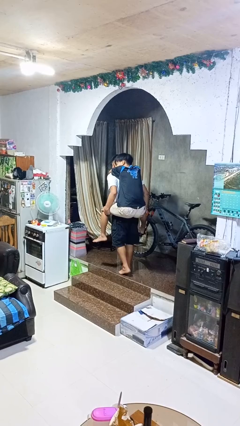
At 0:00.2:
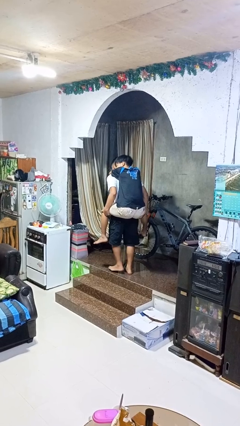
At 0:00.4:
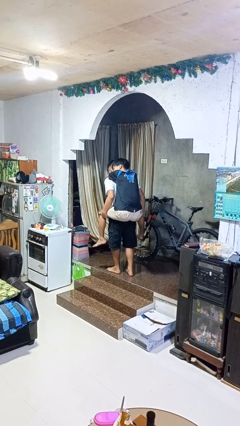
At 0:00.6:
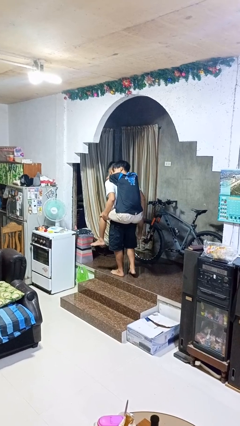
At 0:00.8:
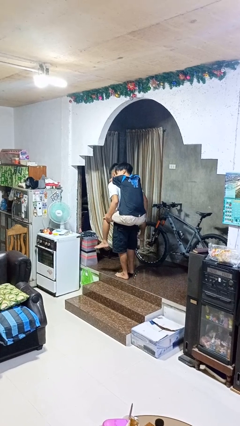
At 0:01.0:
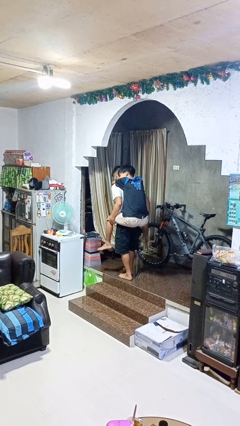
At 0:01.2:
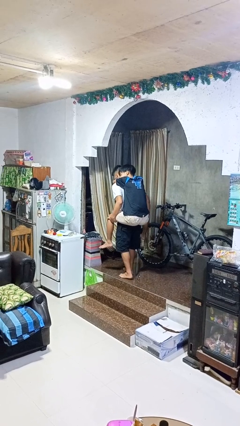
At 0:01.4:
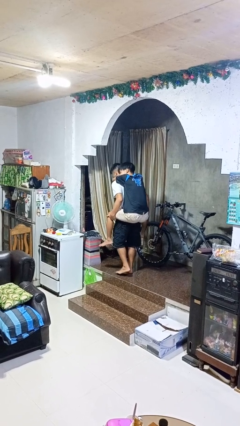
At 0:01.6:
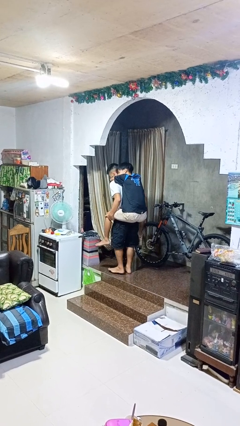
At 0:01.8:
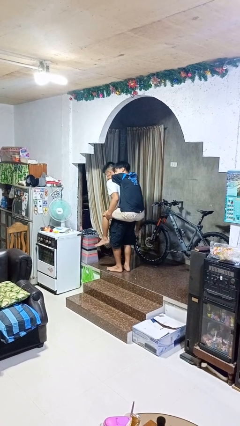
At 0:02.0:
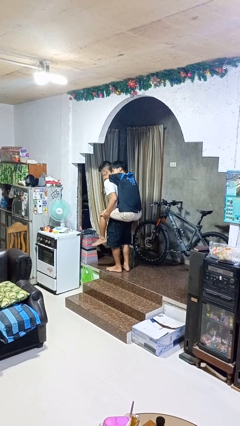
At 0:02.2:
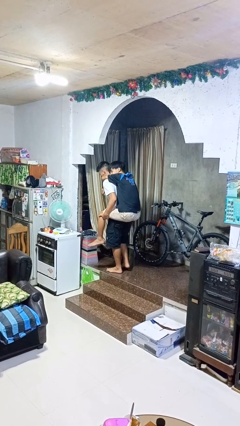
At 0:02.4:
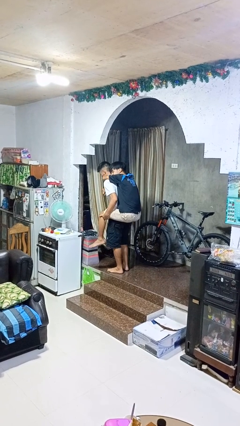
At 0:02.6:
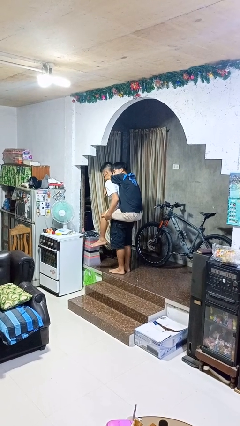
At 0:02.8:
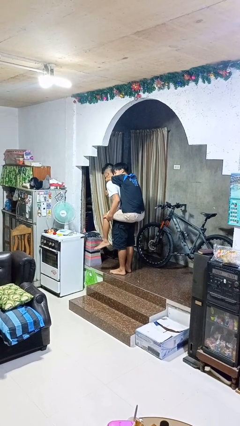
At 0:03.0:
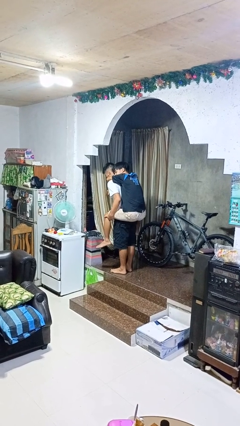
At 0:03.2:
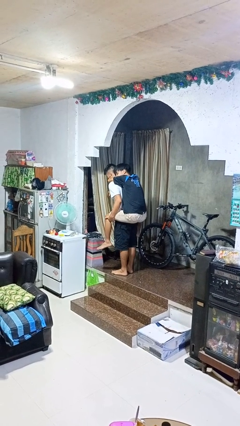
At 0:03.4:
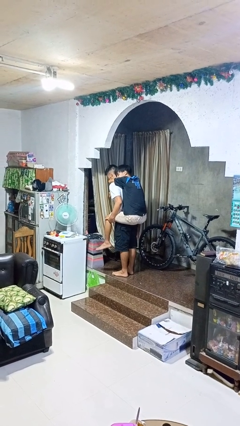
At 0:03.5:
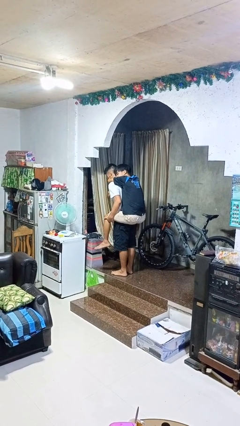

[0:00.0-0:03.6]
person carries person on back

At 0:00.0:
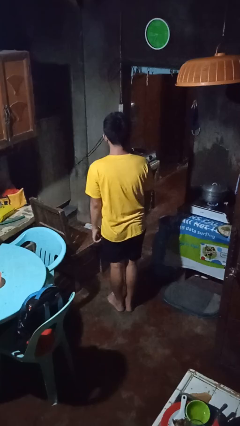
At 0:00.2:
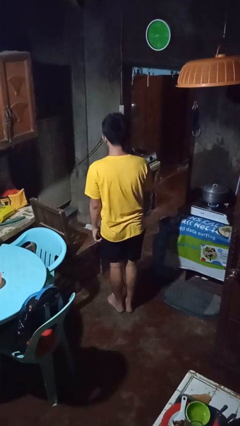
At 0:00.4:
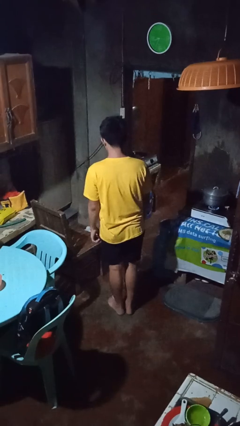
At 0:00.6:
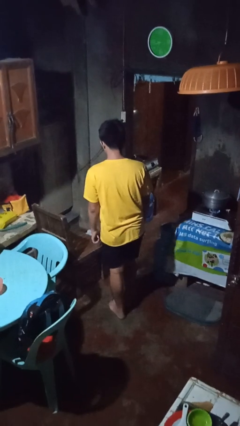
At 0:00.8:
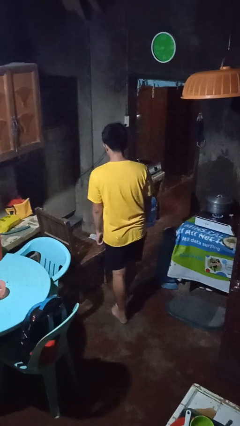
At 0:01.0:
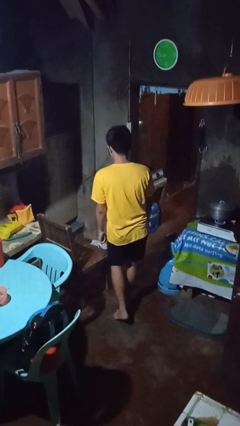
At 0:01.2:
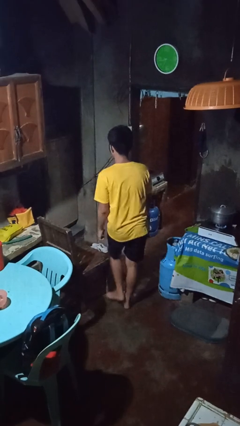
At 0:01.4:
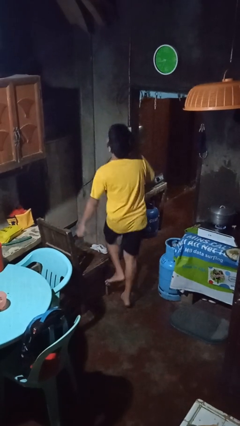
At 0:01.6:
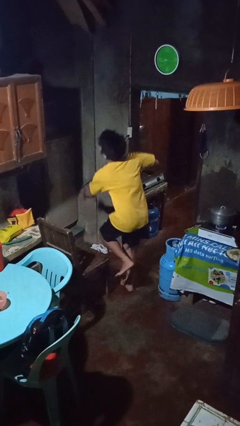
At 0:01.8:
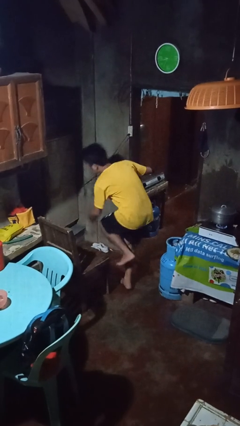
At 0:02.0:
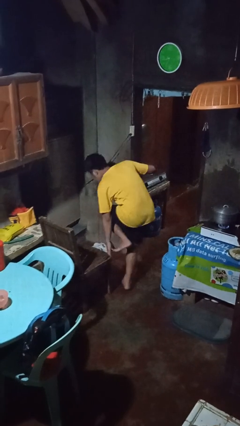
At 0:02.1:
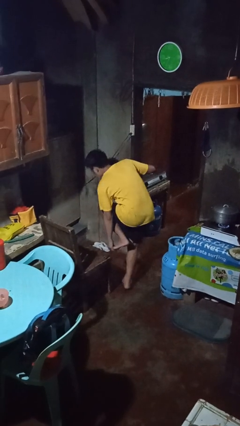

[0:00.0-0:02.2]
person trips on object on floor

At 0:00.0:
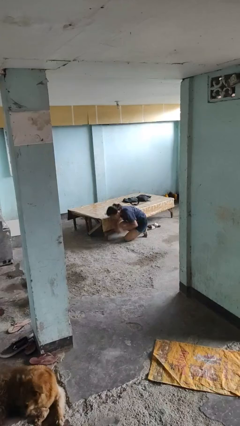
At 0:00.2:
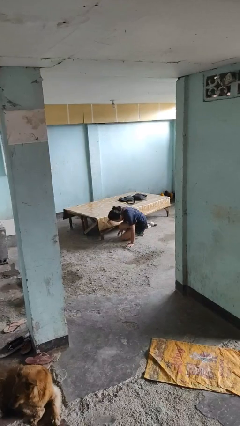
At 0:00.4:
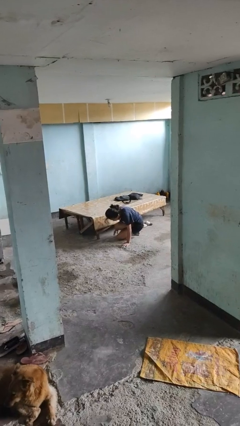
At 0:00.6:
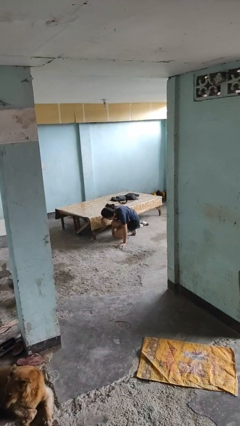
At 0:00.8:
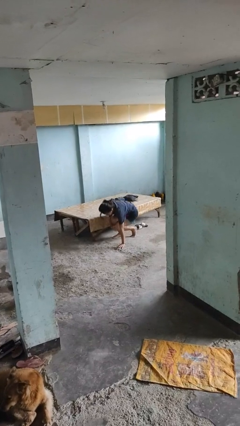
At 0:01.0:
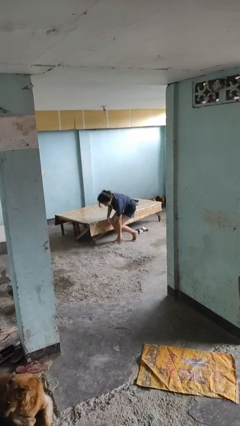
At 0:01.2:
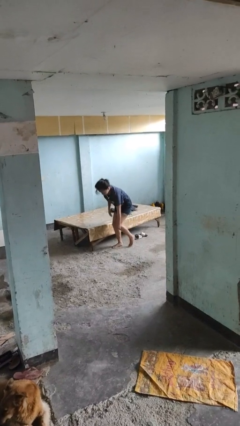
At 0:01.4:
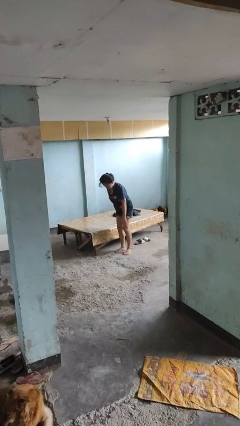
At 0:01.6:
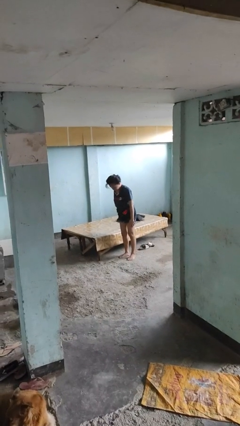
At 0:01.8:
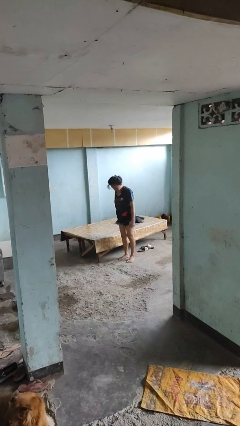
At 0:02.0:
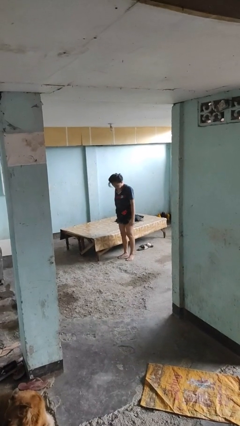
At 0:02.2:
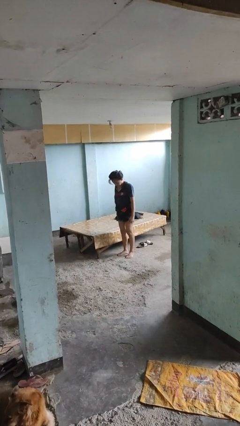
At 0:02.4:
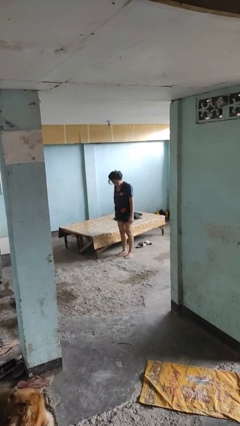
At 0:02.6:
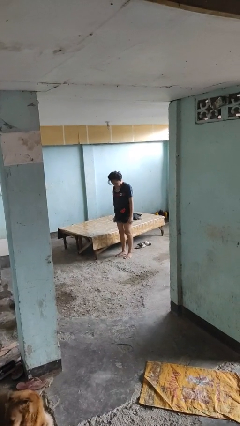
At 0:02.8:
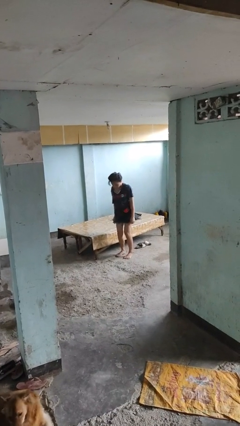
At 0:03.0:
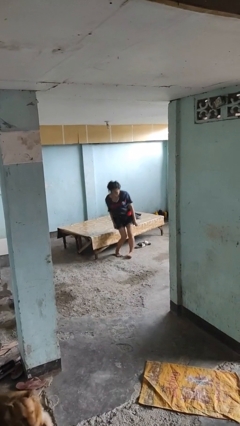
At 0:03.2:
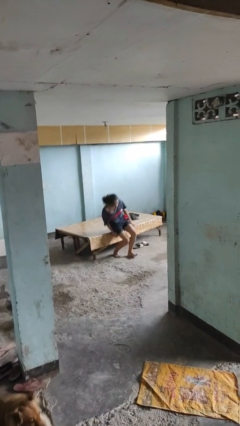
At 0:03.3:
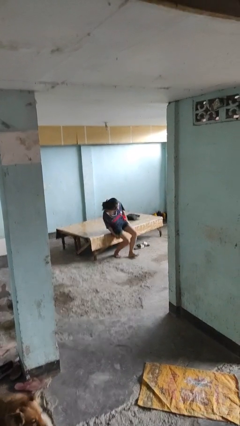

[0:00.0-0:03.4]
person stands up from floor

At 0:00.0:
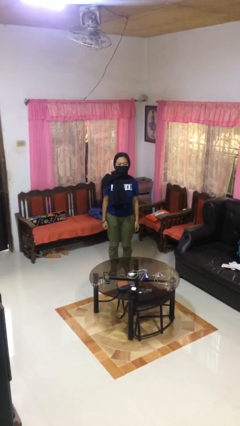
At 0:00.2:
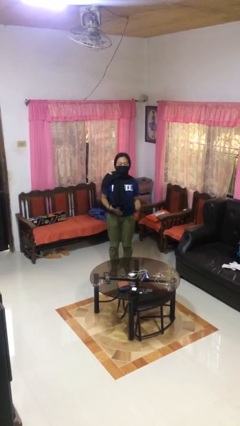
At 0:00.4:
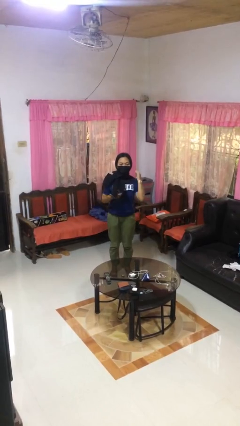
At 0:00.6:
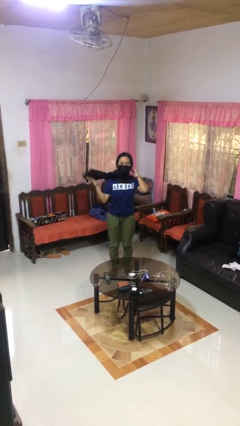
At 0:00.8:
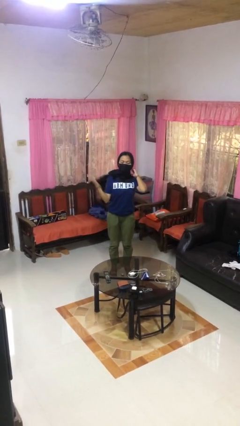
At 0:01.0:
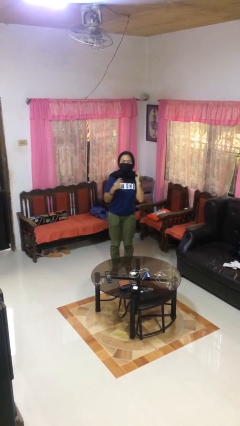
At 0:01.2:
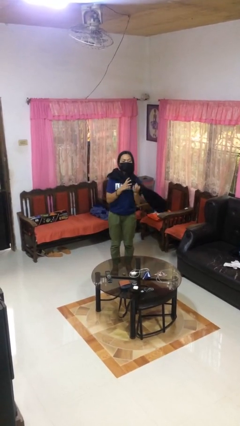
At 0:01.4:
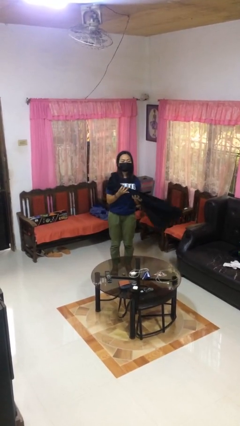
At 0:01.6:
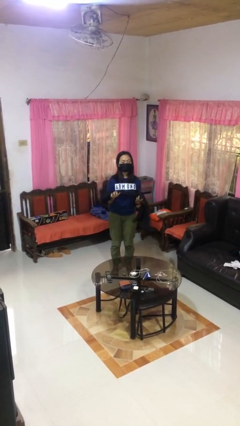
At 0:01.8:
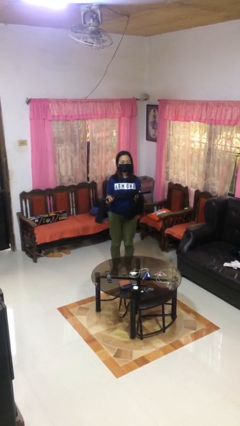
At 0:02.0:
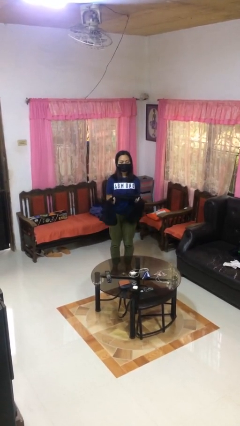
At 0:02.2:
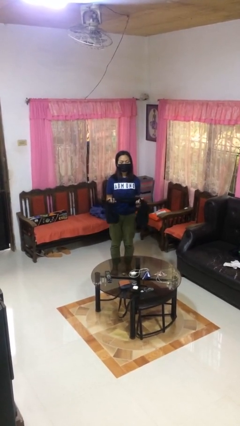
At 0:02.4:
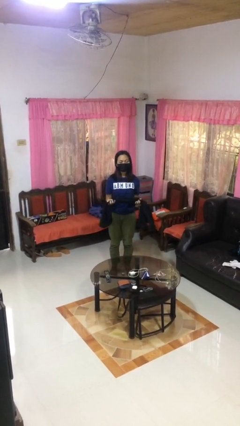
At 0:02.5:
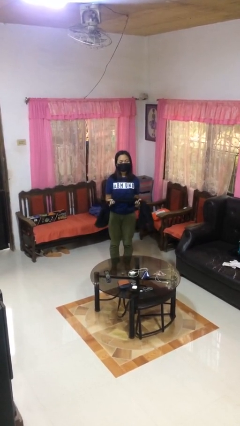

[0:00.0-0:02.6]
person takes off scarf

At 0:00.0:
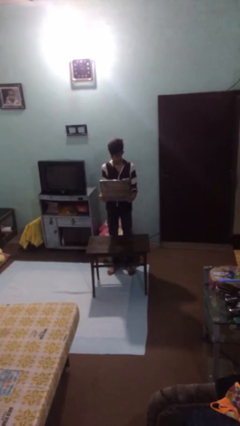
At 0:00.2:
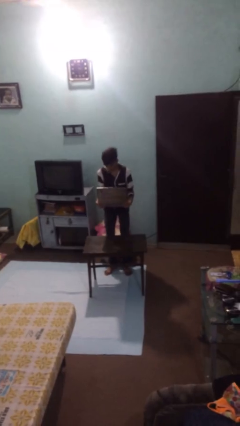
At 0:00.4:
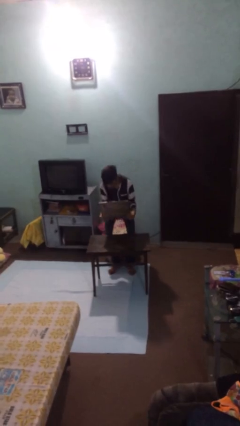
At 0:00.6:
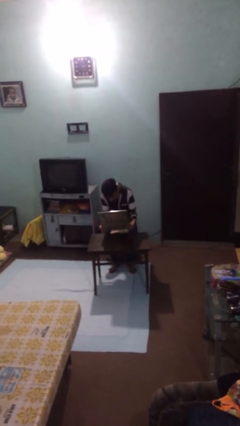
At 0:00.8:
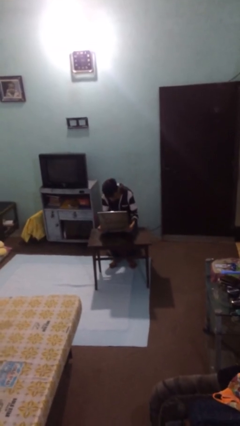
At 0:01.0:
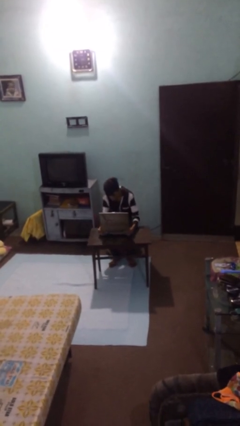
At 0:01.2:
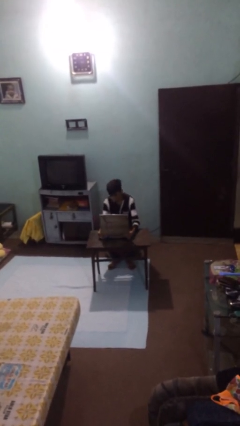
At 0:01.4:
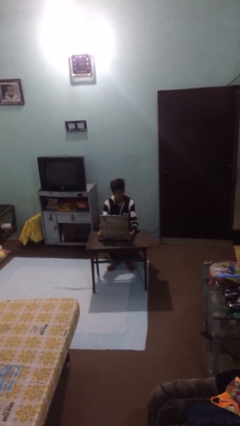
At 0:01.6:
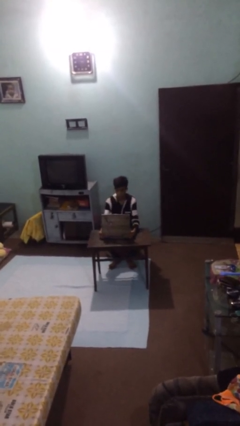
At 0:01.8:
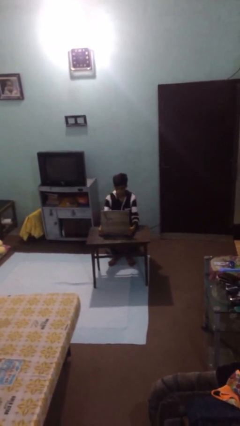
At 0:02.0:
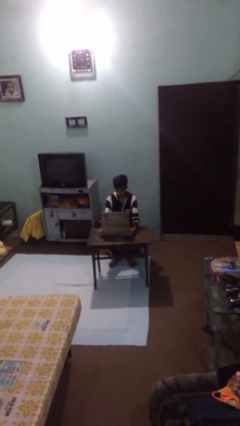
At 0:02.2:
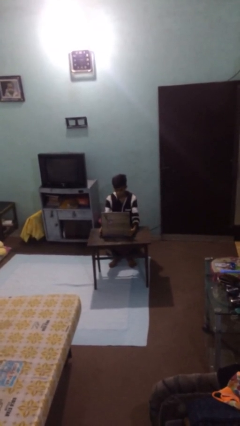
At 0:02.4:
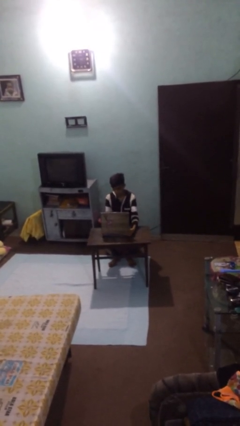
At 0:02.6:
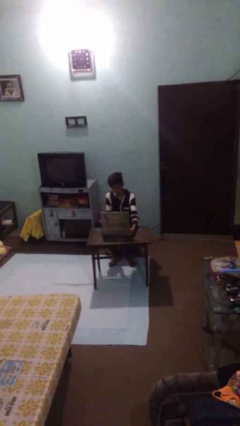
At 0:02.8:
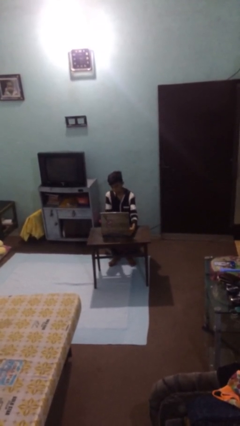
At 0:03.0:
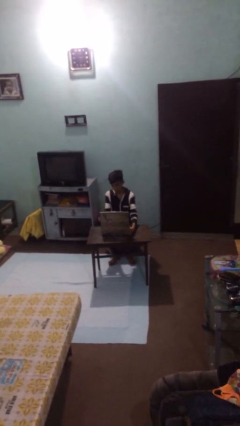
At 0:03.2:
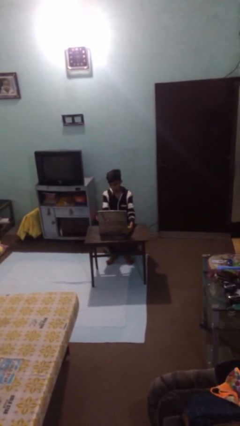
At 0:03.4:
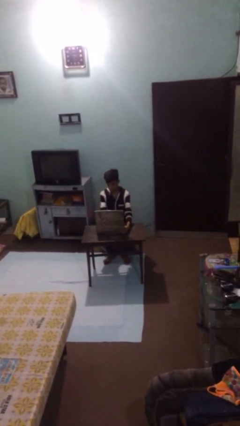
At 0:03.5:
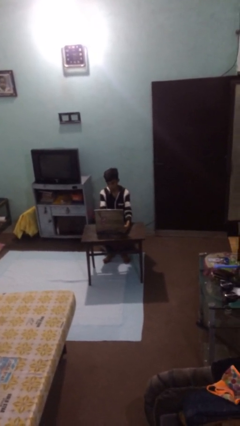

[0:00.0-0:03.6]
person sits down

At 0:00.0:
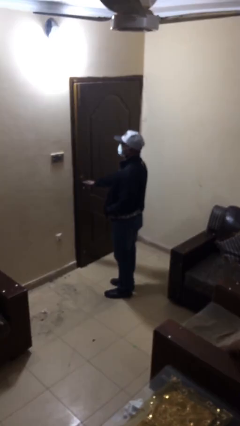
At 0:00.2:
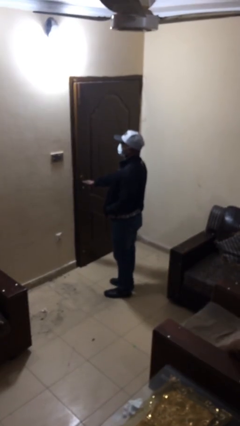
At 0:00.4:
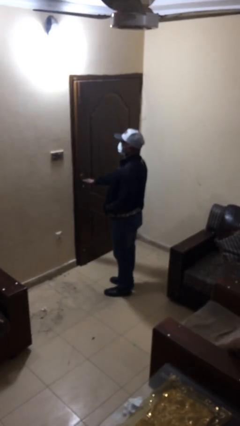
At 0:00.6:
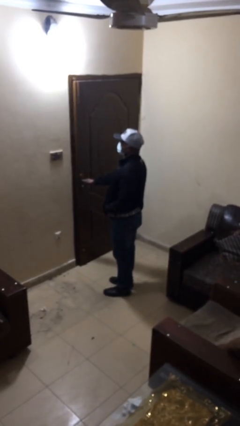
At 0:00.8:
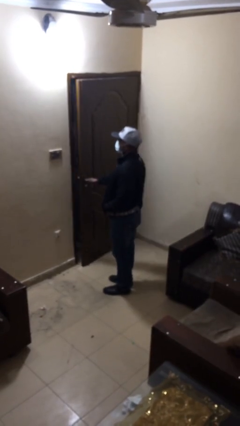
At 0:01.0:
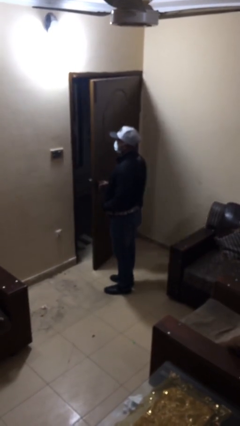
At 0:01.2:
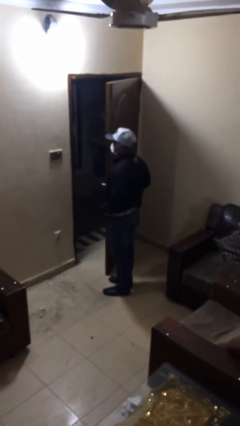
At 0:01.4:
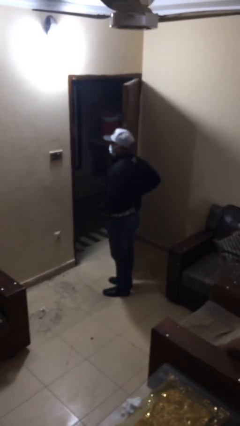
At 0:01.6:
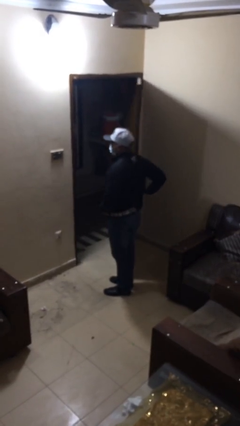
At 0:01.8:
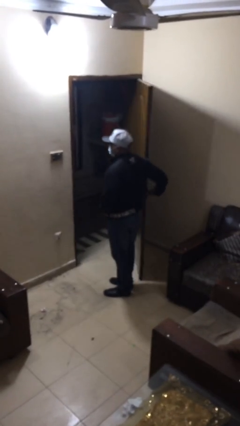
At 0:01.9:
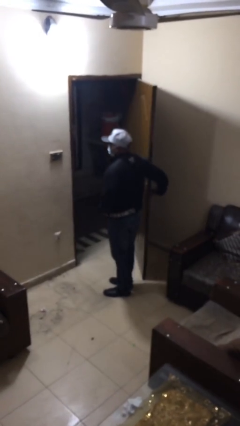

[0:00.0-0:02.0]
person opens facility door
